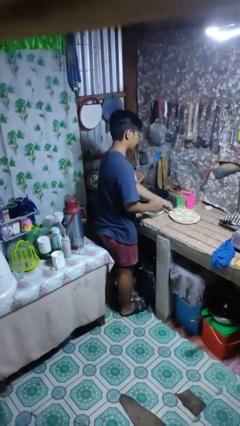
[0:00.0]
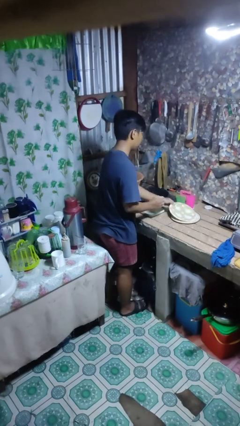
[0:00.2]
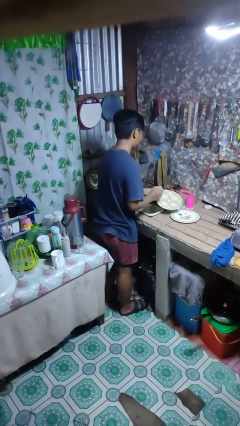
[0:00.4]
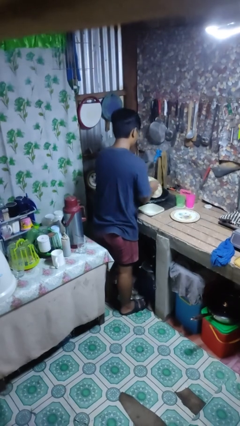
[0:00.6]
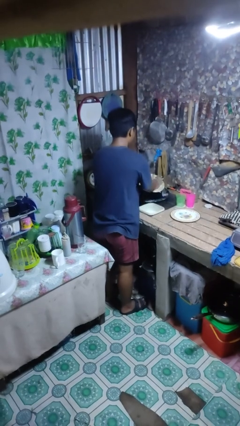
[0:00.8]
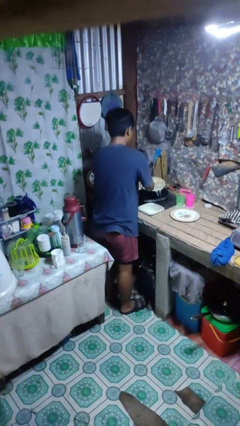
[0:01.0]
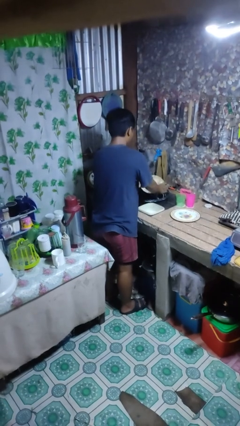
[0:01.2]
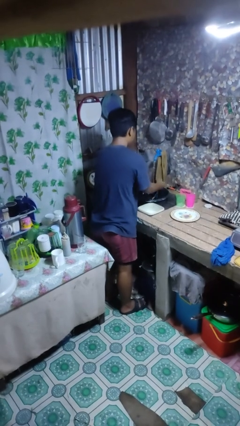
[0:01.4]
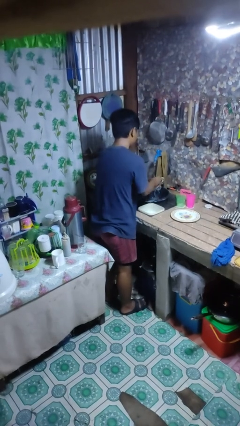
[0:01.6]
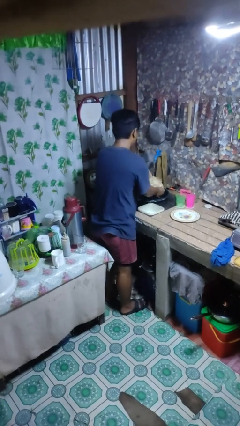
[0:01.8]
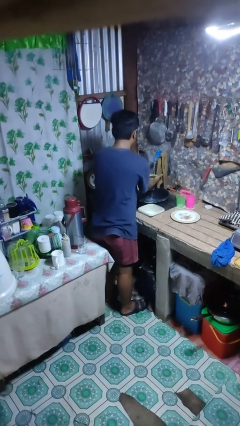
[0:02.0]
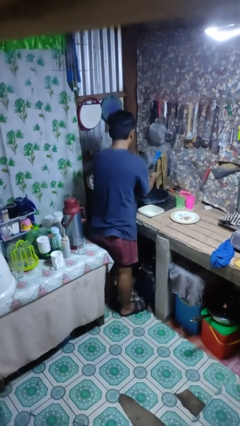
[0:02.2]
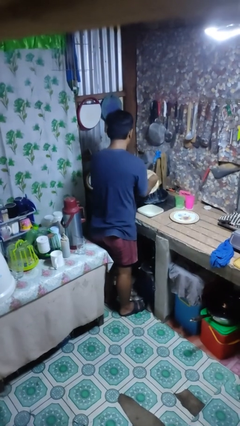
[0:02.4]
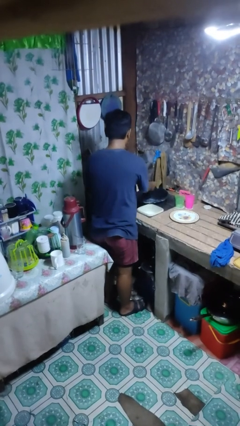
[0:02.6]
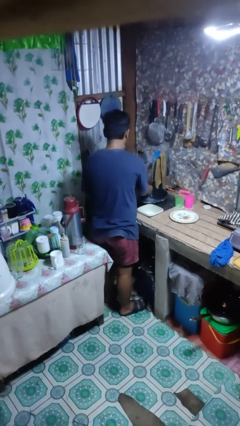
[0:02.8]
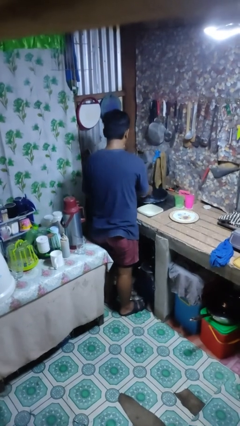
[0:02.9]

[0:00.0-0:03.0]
person washes dish

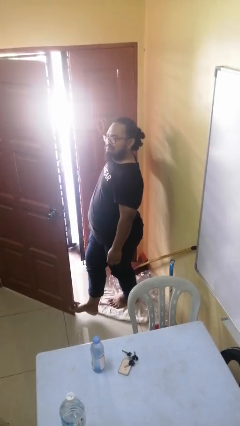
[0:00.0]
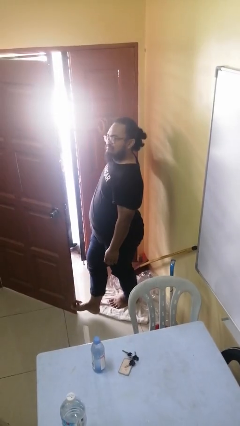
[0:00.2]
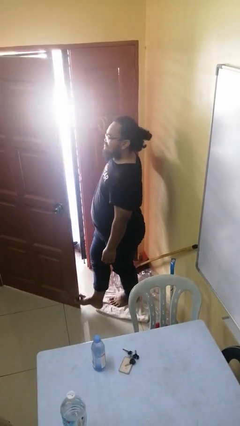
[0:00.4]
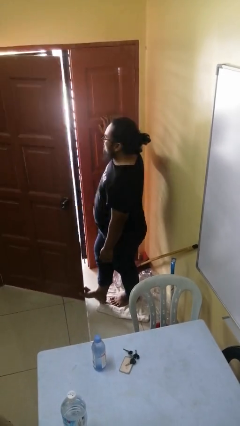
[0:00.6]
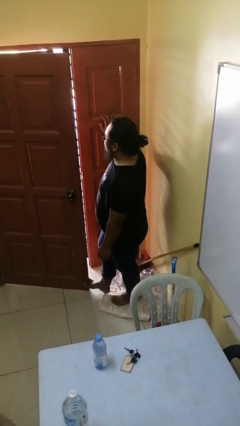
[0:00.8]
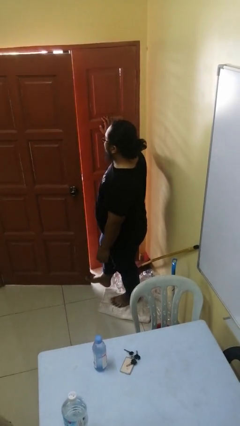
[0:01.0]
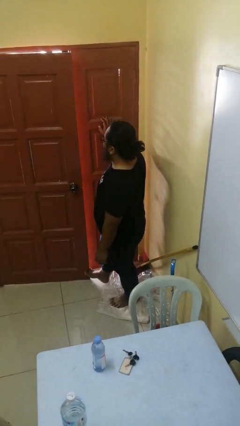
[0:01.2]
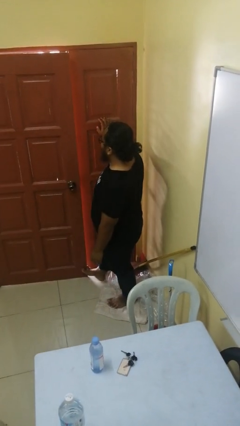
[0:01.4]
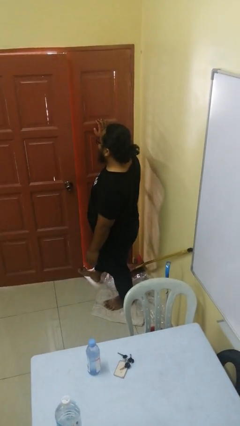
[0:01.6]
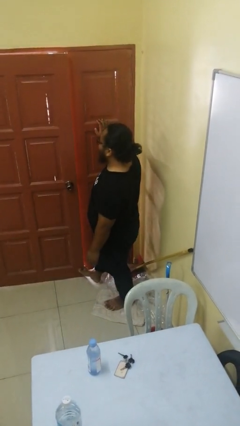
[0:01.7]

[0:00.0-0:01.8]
person closes door with foot

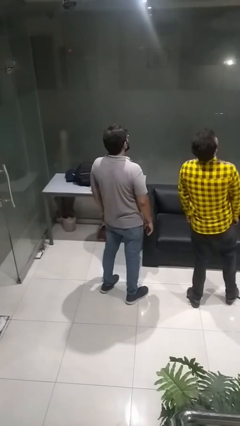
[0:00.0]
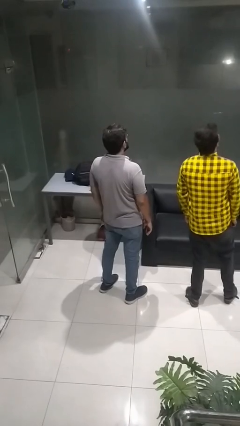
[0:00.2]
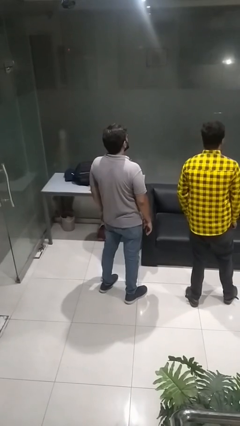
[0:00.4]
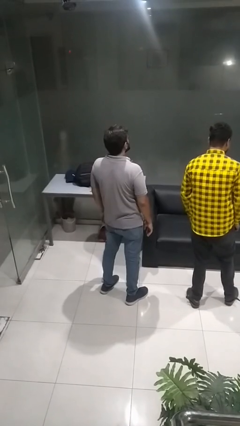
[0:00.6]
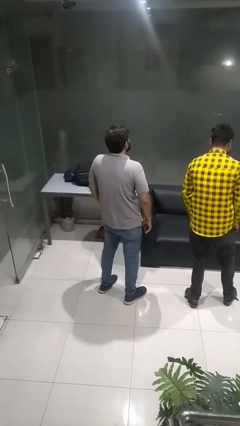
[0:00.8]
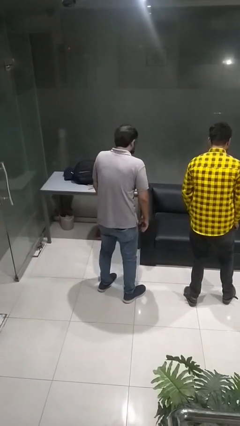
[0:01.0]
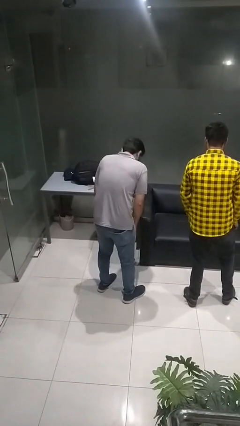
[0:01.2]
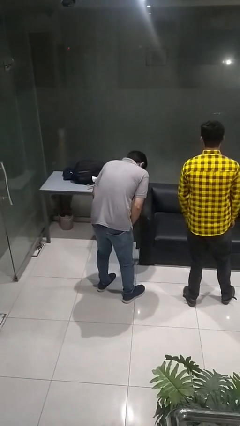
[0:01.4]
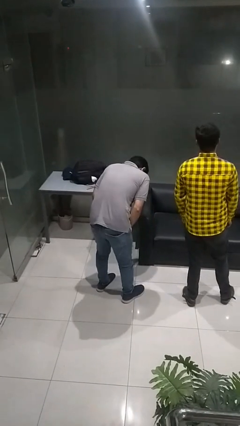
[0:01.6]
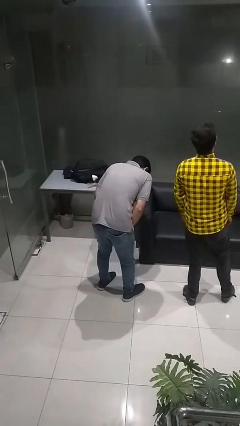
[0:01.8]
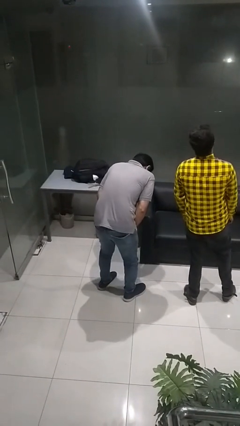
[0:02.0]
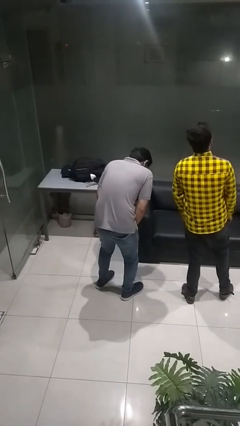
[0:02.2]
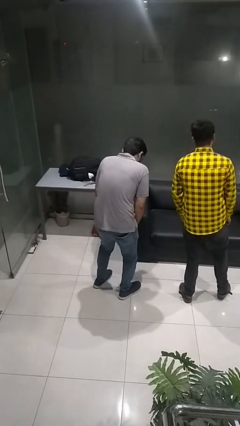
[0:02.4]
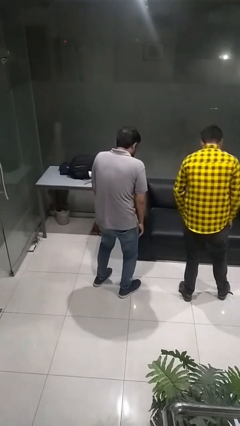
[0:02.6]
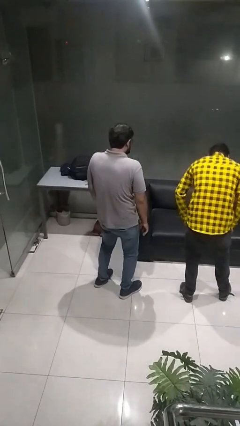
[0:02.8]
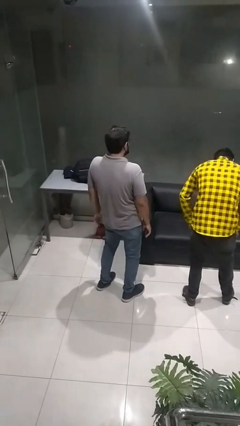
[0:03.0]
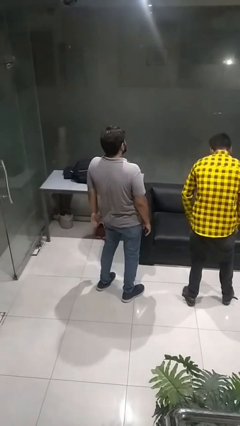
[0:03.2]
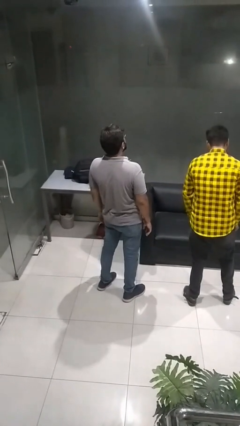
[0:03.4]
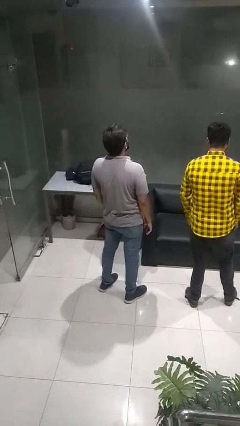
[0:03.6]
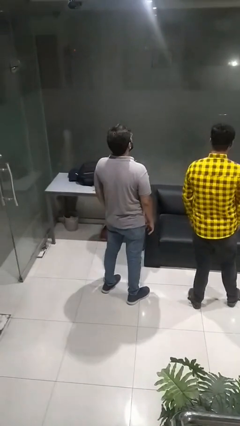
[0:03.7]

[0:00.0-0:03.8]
person laughs with person

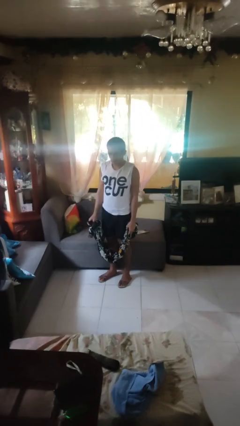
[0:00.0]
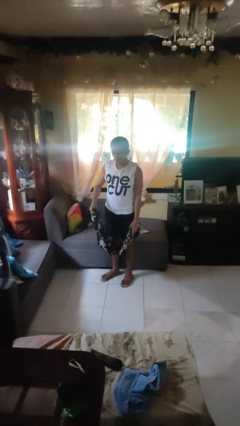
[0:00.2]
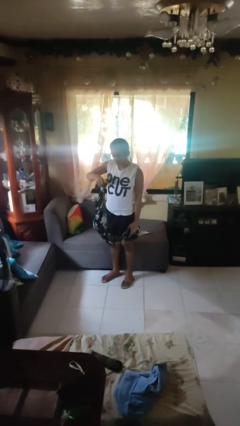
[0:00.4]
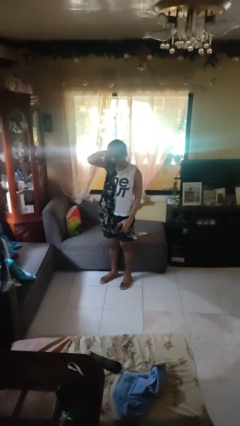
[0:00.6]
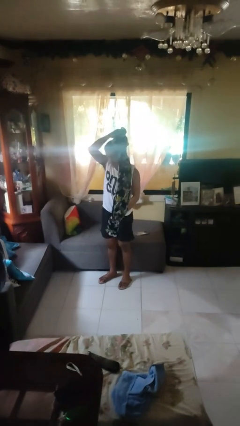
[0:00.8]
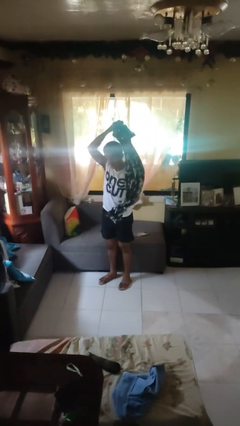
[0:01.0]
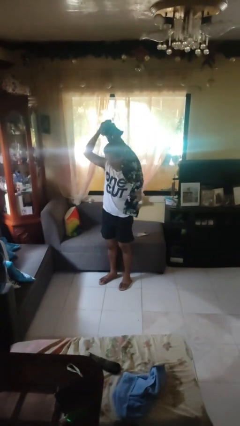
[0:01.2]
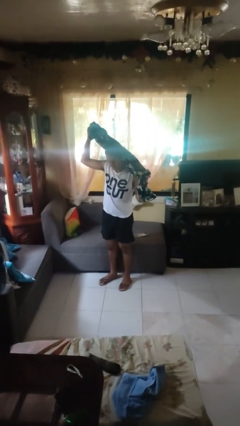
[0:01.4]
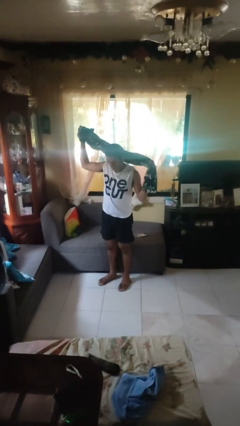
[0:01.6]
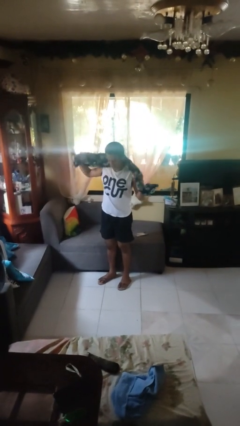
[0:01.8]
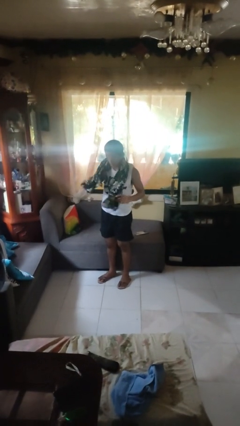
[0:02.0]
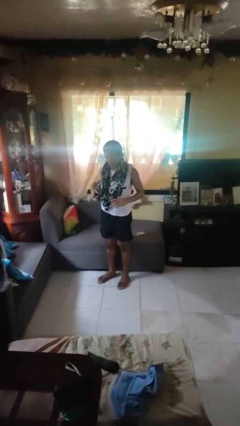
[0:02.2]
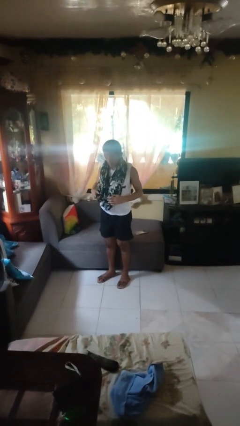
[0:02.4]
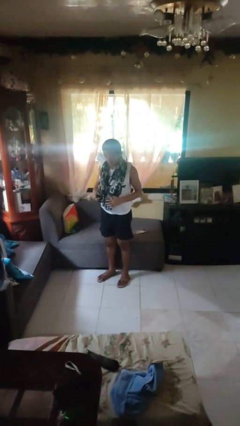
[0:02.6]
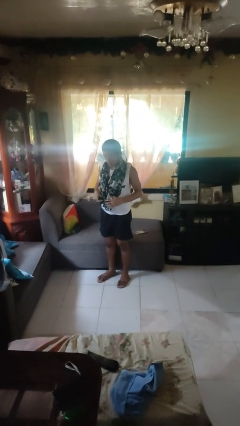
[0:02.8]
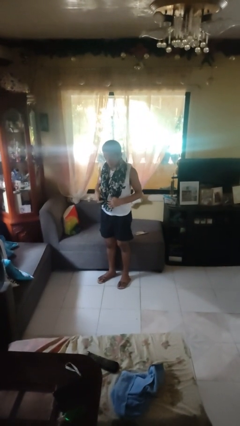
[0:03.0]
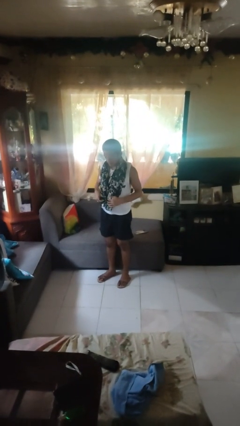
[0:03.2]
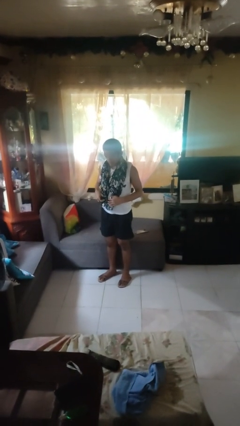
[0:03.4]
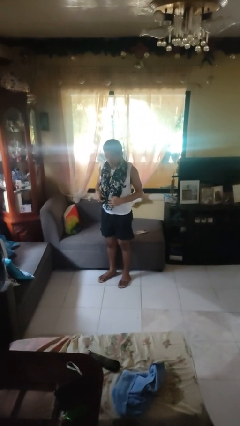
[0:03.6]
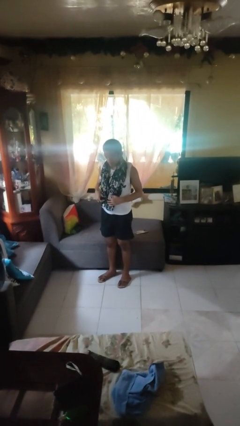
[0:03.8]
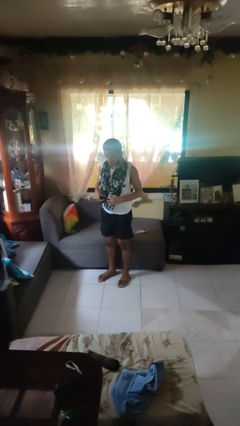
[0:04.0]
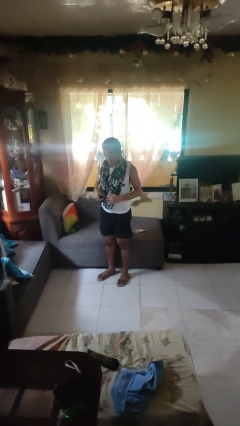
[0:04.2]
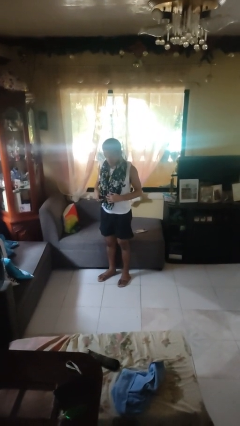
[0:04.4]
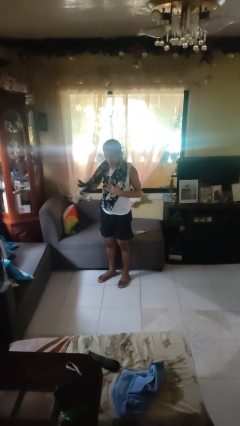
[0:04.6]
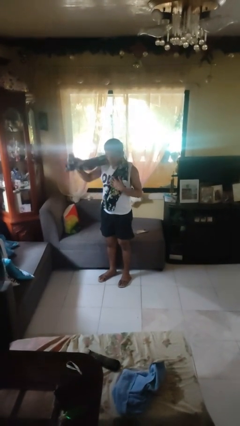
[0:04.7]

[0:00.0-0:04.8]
person puts on scarf

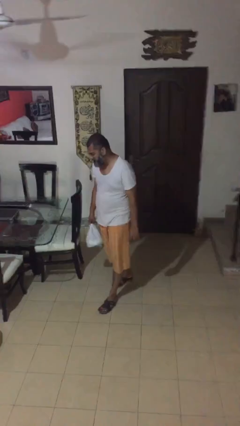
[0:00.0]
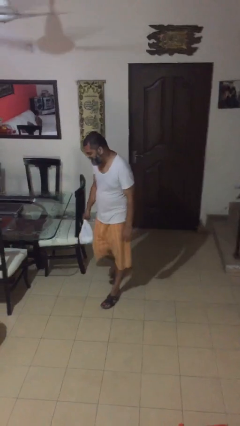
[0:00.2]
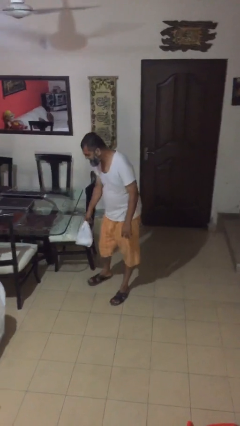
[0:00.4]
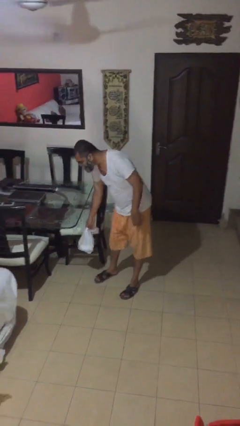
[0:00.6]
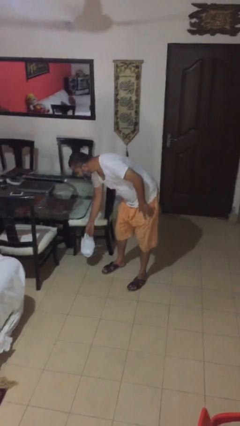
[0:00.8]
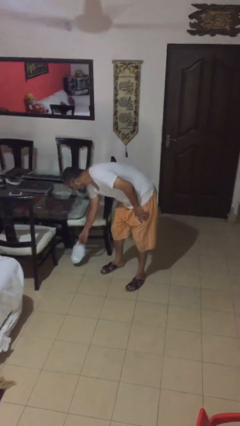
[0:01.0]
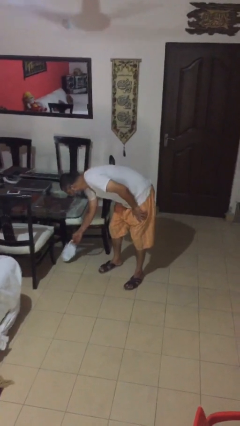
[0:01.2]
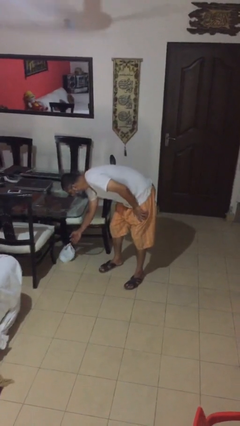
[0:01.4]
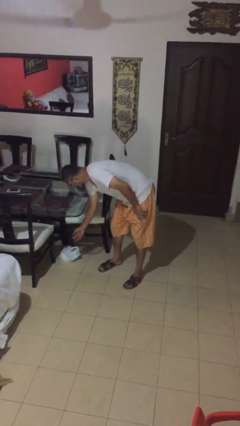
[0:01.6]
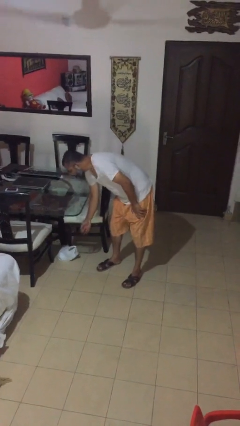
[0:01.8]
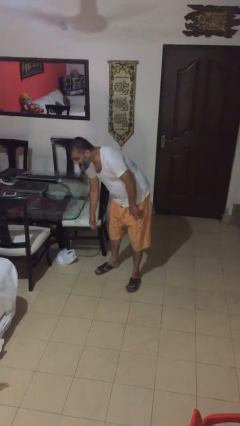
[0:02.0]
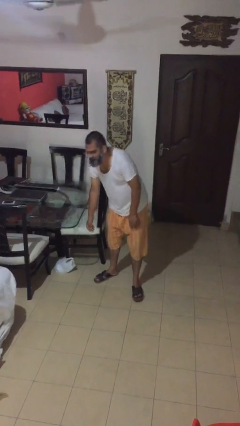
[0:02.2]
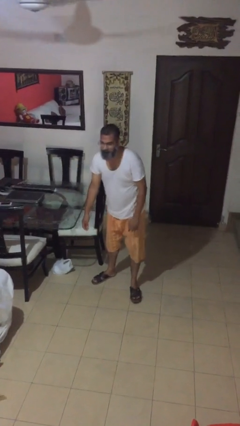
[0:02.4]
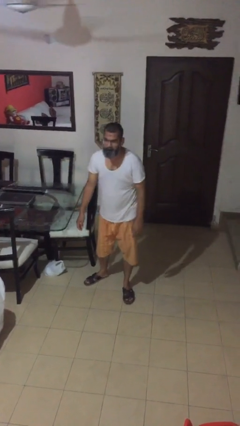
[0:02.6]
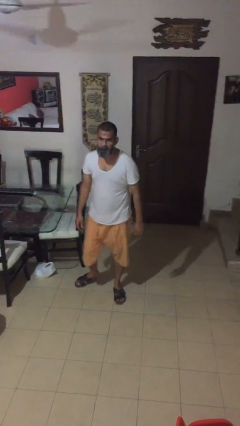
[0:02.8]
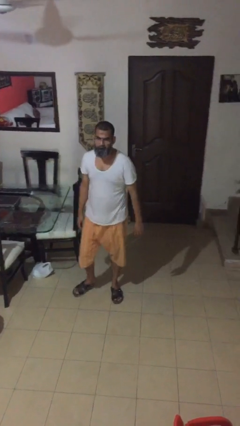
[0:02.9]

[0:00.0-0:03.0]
person puts down object on table

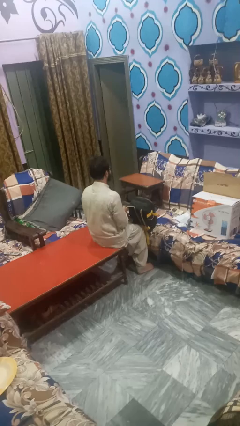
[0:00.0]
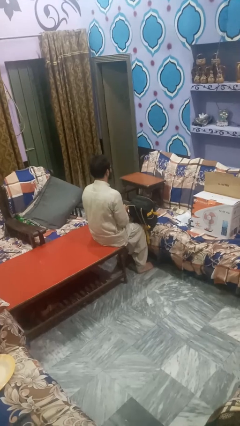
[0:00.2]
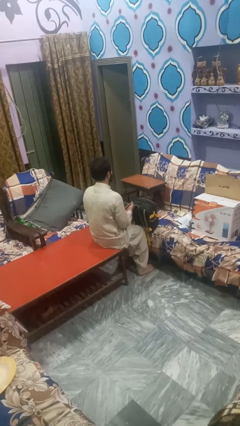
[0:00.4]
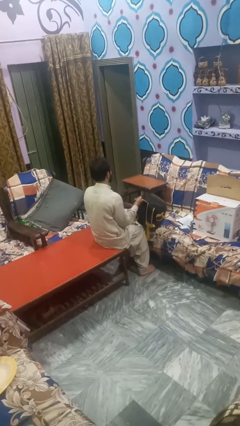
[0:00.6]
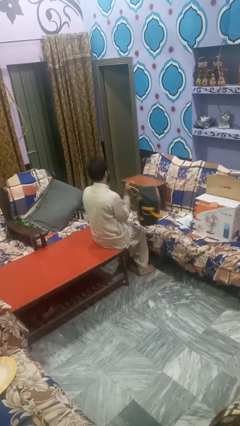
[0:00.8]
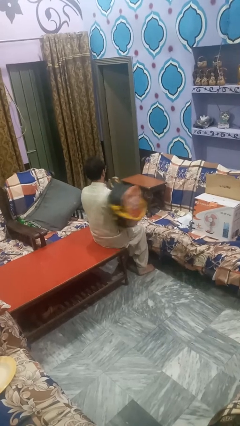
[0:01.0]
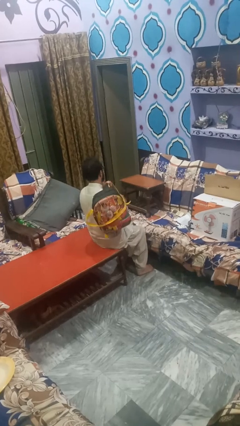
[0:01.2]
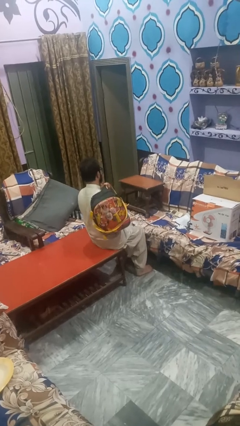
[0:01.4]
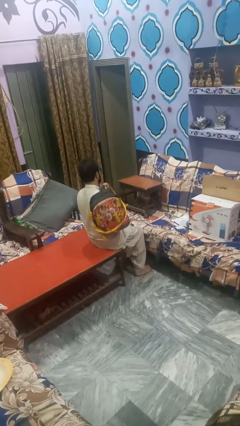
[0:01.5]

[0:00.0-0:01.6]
person puts on backpack
